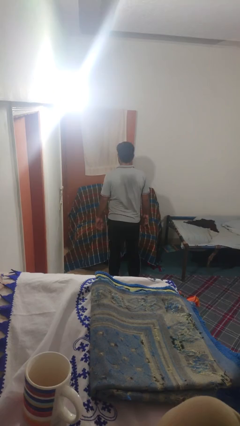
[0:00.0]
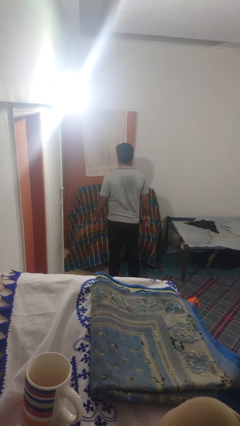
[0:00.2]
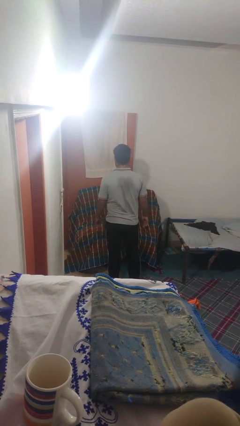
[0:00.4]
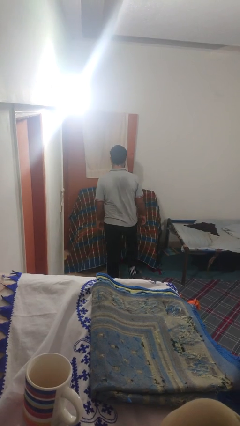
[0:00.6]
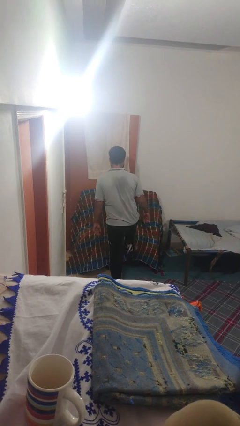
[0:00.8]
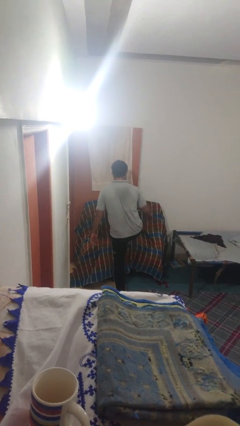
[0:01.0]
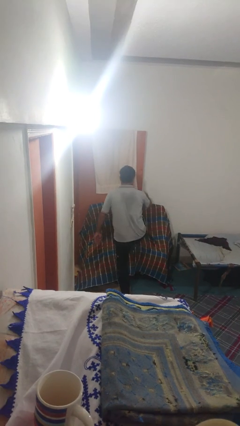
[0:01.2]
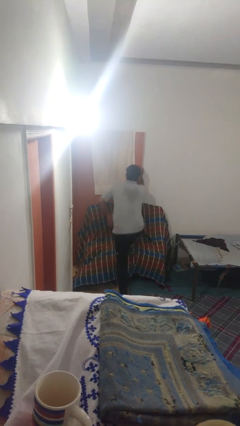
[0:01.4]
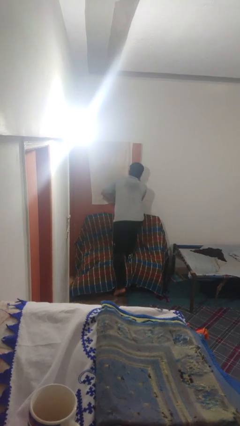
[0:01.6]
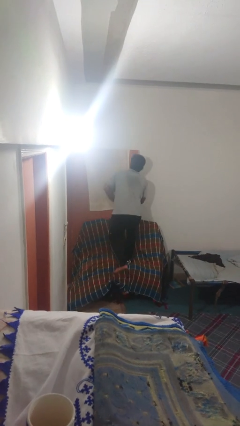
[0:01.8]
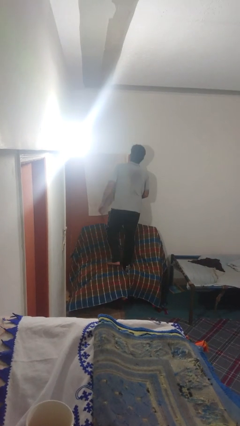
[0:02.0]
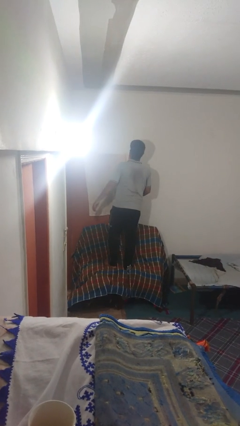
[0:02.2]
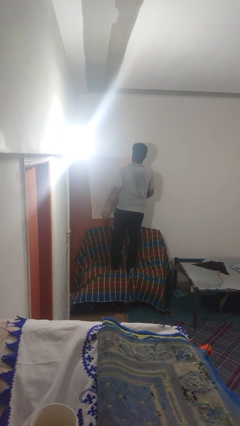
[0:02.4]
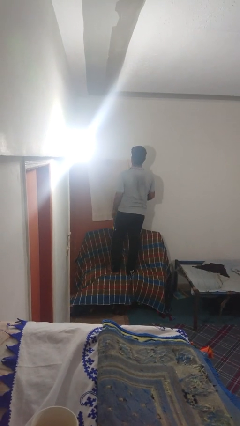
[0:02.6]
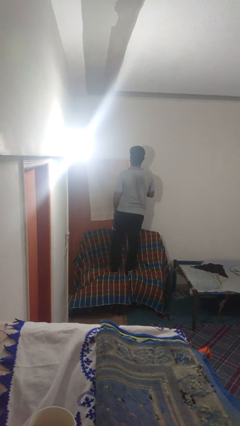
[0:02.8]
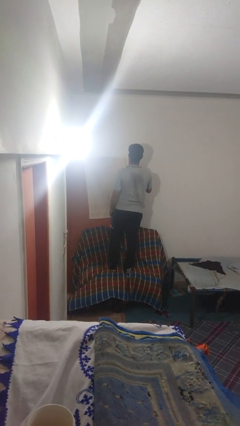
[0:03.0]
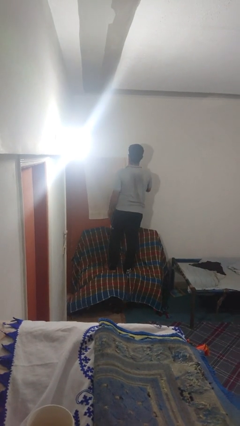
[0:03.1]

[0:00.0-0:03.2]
person climbs on couch

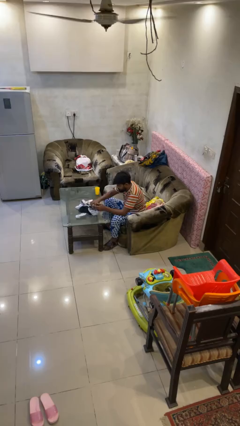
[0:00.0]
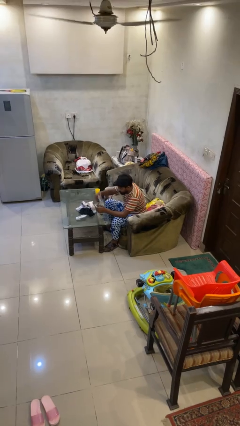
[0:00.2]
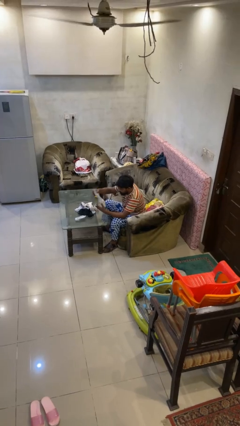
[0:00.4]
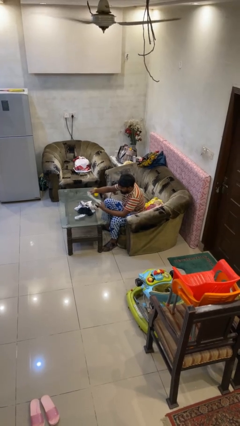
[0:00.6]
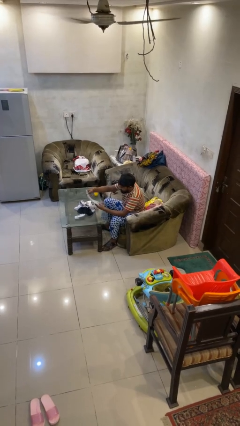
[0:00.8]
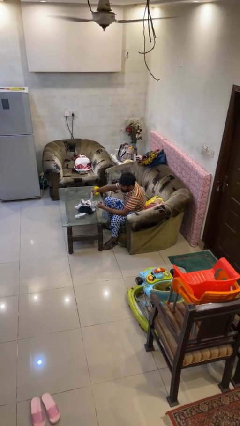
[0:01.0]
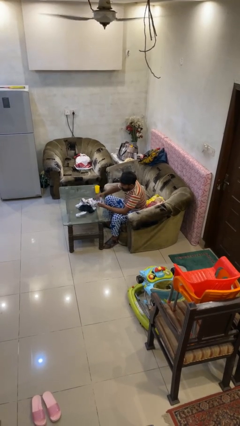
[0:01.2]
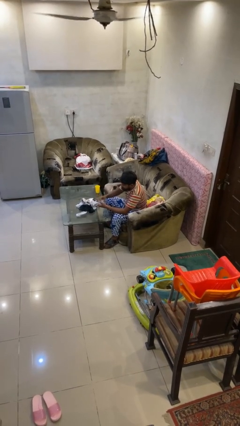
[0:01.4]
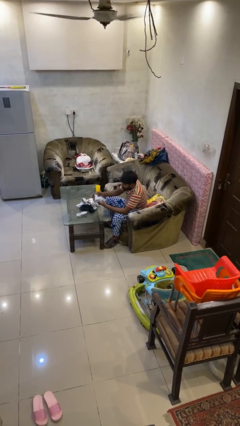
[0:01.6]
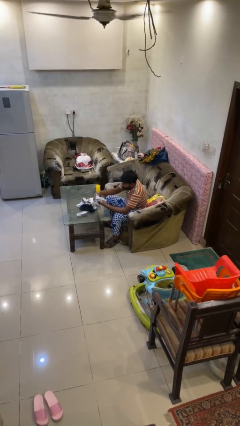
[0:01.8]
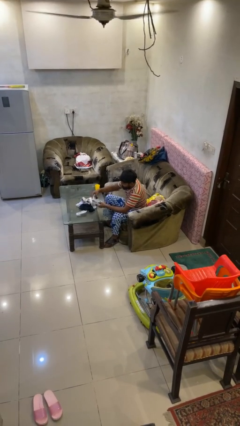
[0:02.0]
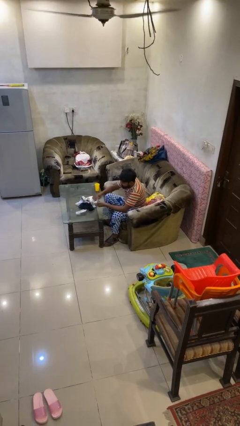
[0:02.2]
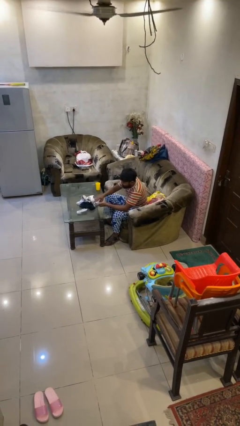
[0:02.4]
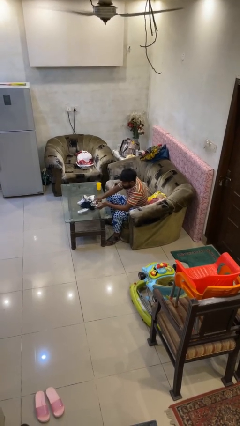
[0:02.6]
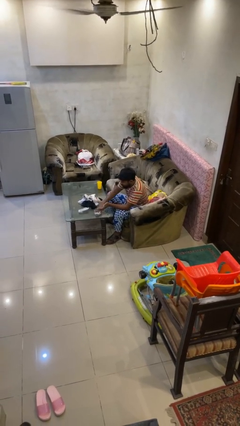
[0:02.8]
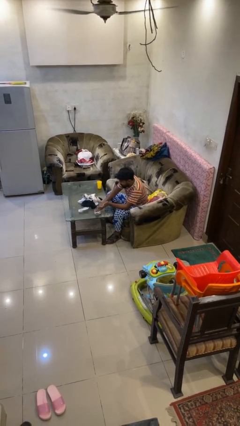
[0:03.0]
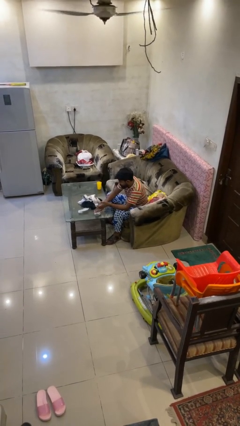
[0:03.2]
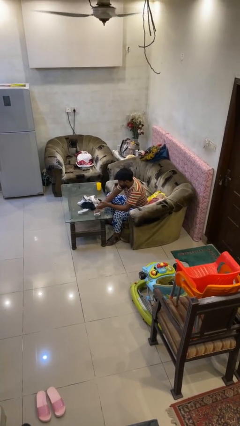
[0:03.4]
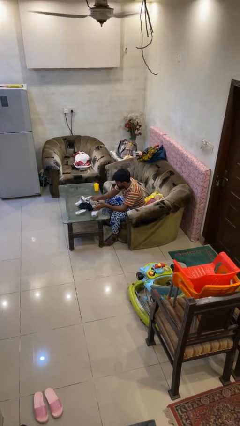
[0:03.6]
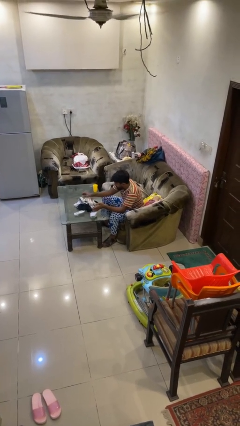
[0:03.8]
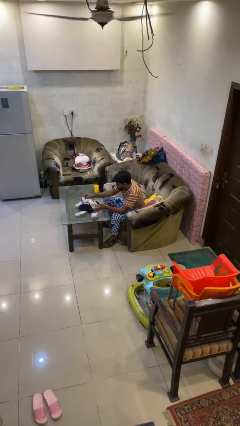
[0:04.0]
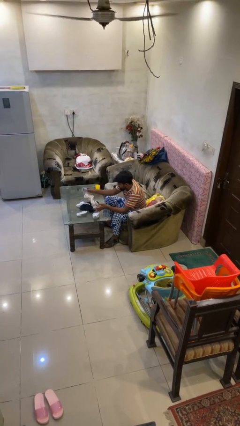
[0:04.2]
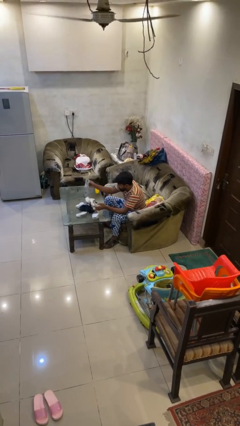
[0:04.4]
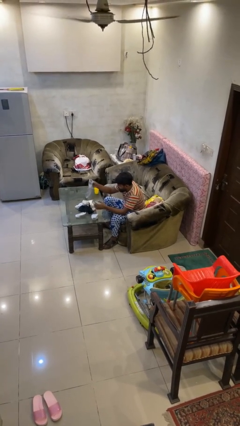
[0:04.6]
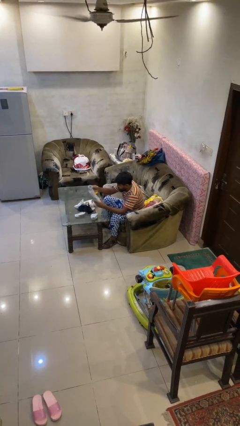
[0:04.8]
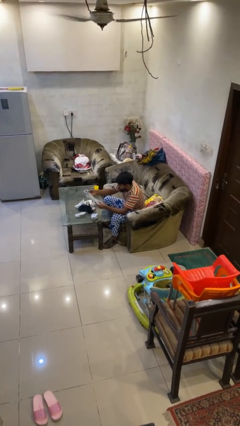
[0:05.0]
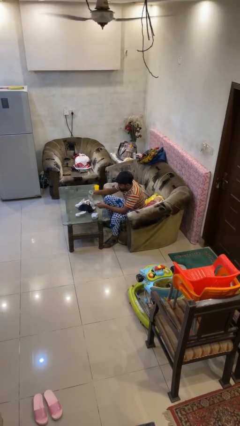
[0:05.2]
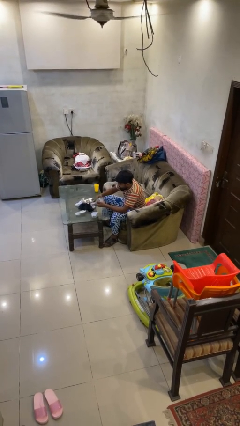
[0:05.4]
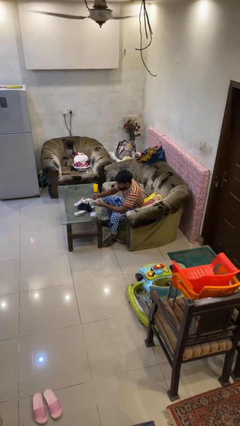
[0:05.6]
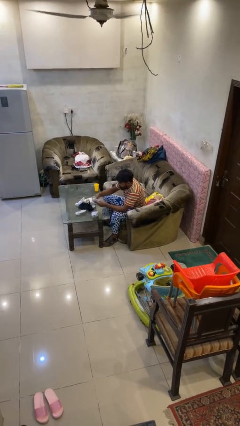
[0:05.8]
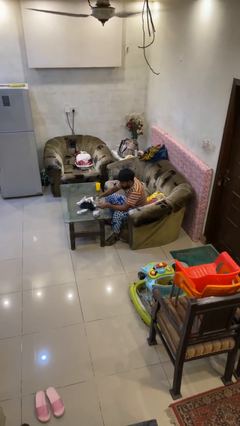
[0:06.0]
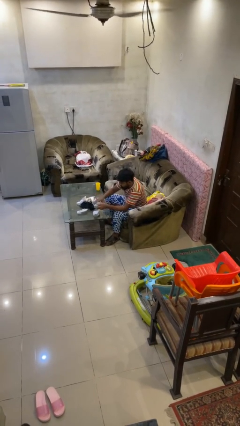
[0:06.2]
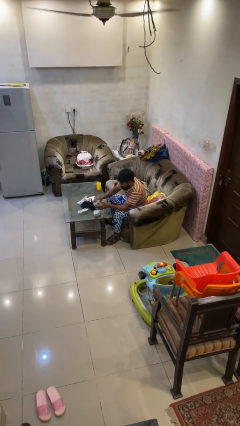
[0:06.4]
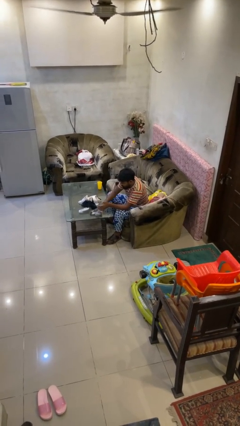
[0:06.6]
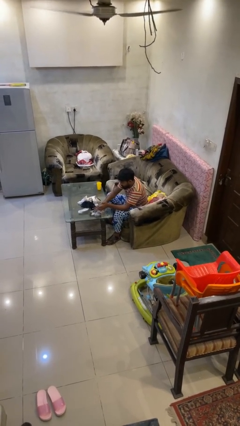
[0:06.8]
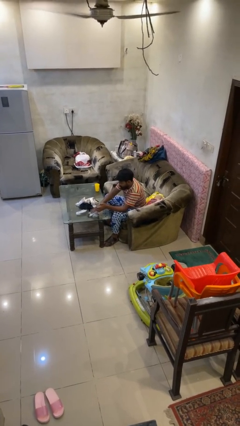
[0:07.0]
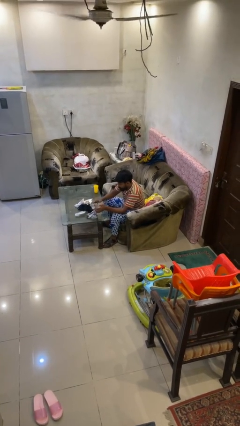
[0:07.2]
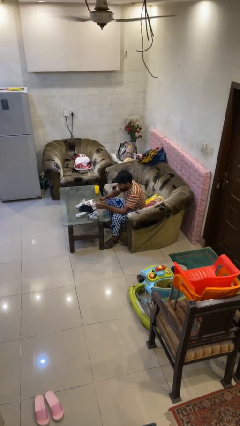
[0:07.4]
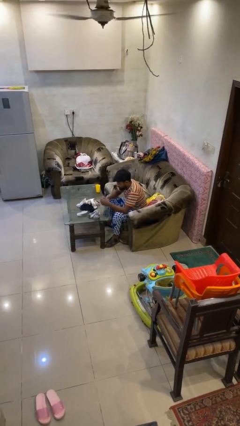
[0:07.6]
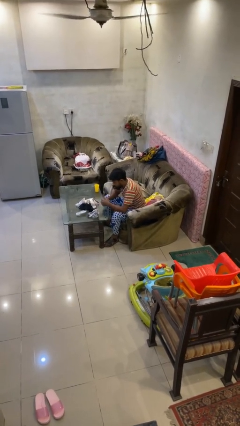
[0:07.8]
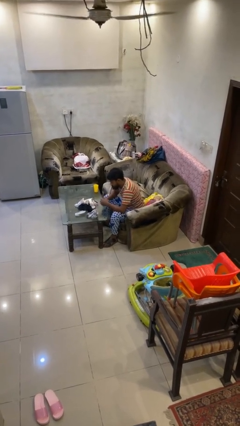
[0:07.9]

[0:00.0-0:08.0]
person folds socks

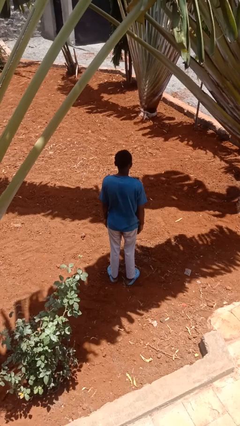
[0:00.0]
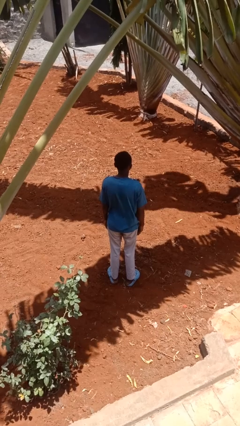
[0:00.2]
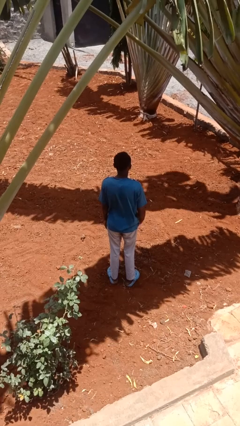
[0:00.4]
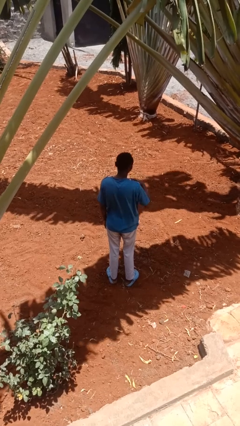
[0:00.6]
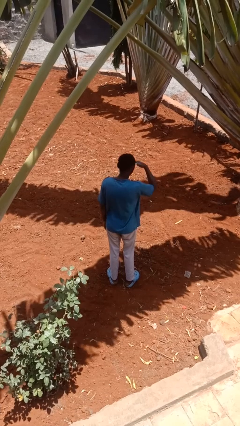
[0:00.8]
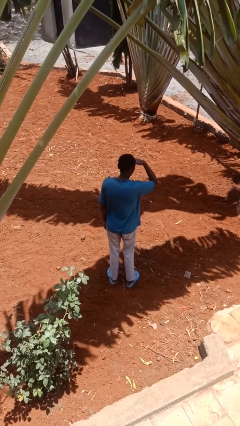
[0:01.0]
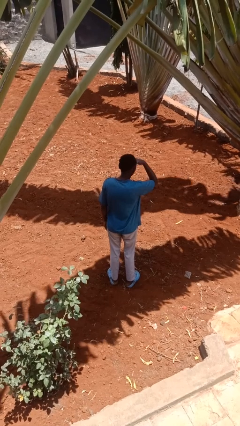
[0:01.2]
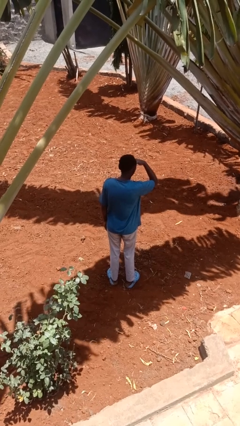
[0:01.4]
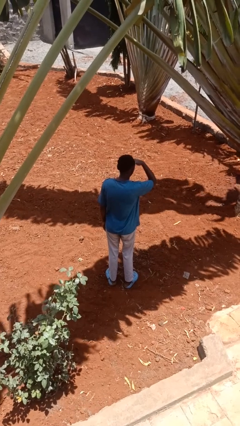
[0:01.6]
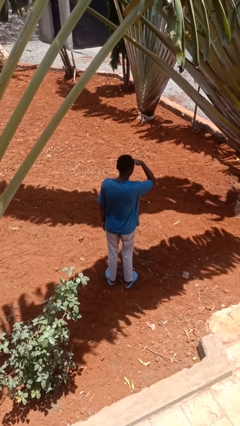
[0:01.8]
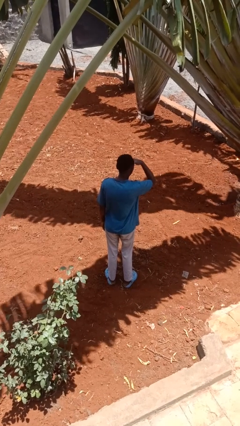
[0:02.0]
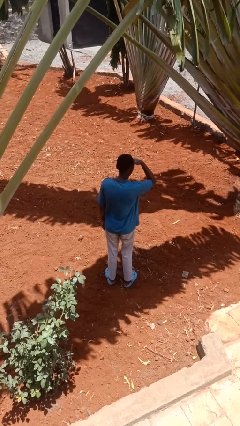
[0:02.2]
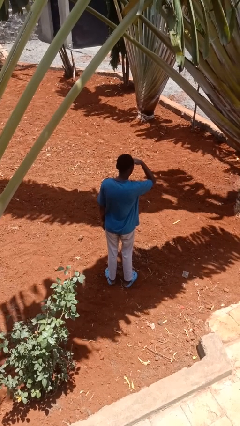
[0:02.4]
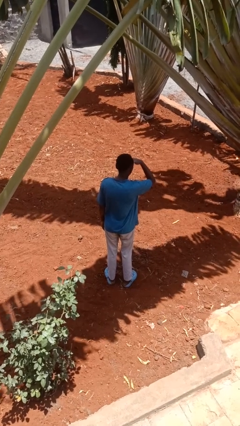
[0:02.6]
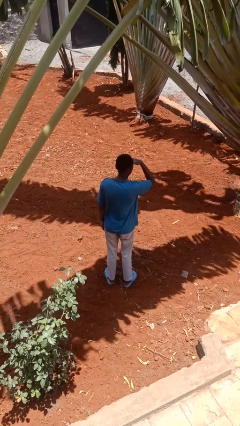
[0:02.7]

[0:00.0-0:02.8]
person shades eyes

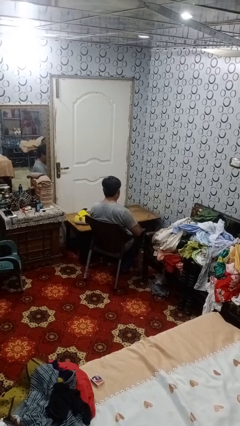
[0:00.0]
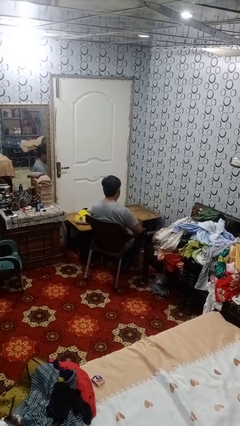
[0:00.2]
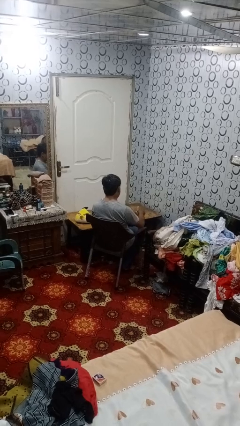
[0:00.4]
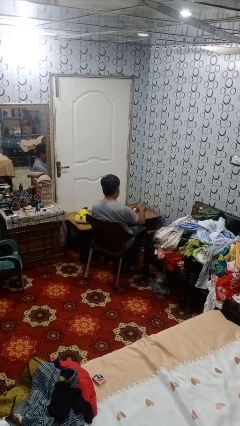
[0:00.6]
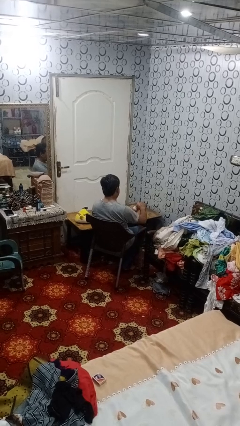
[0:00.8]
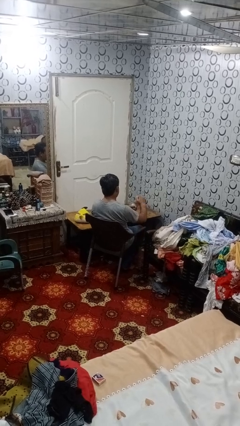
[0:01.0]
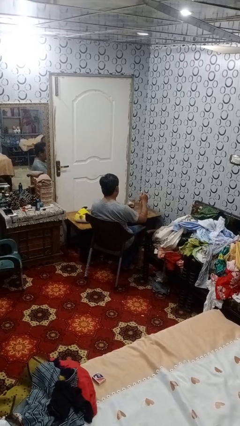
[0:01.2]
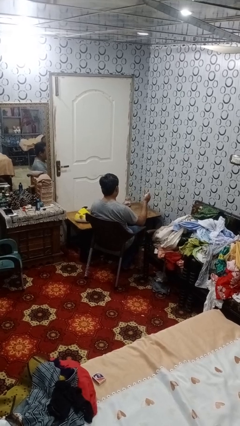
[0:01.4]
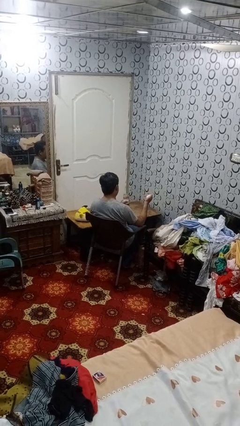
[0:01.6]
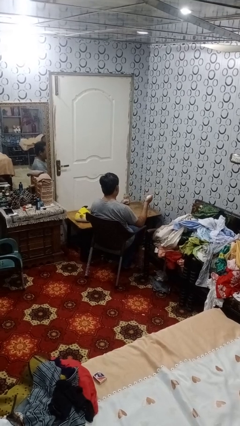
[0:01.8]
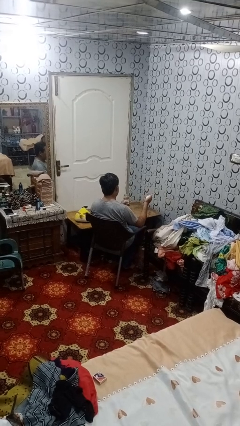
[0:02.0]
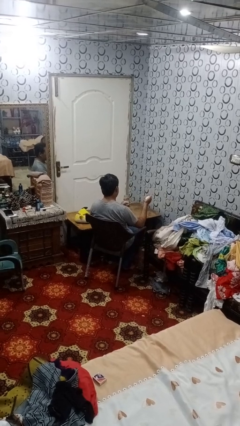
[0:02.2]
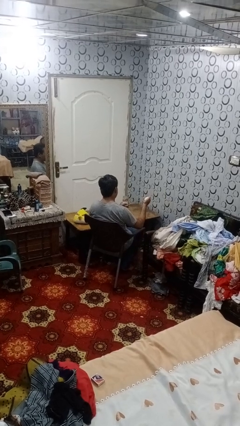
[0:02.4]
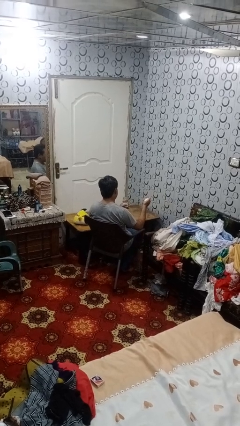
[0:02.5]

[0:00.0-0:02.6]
person opens jar

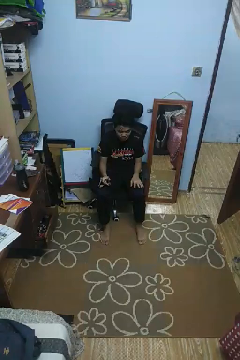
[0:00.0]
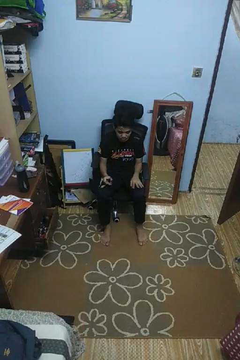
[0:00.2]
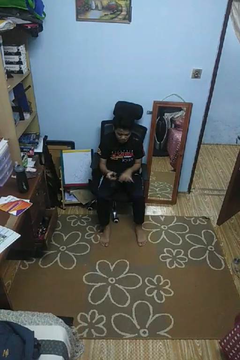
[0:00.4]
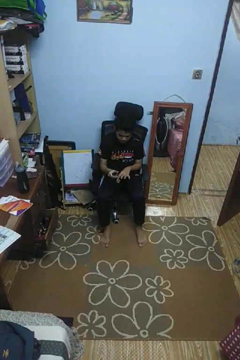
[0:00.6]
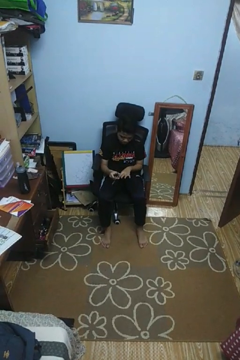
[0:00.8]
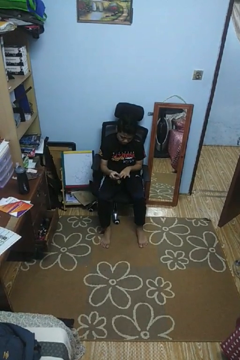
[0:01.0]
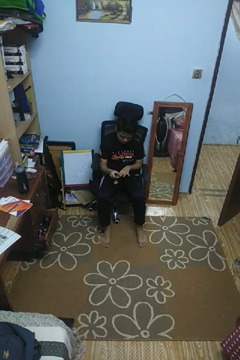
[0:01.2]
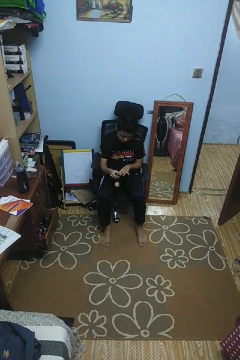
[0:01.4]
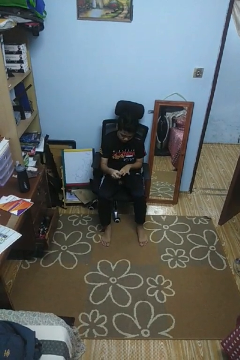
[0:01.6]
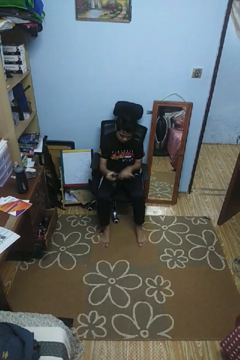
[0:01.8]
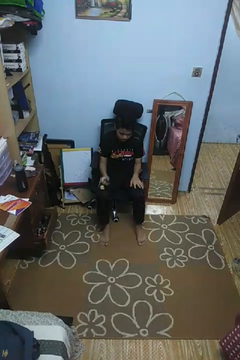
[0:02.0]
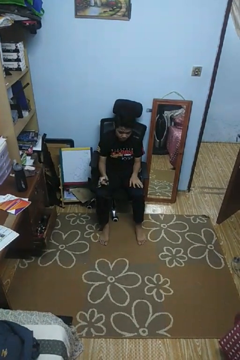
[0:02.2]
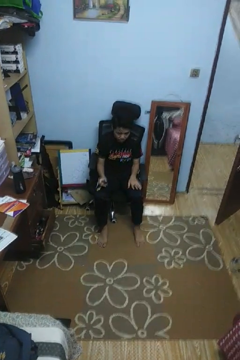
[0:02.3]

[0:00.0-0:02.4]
person clips fingernails
